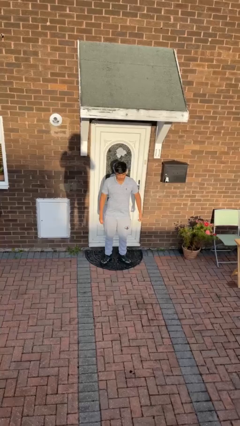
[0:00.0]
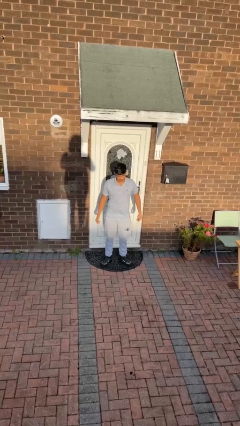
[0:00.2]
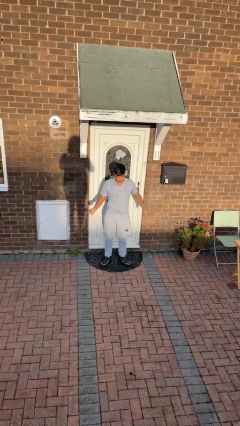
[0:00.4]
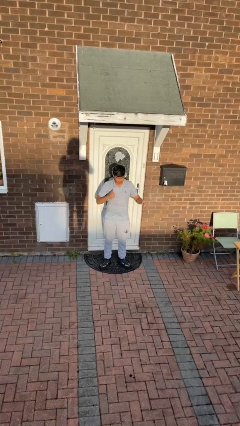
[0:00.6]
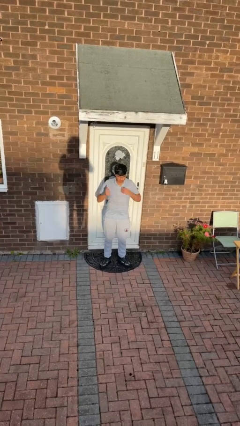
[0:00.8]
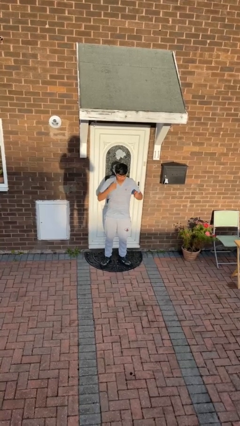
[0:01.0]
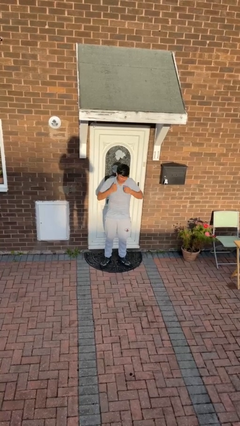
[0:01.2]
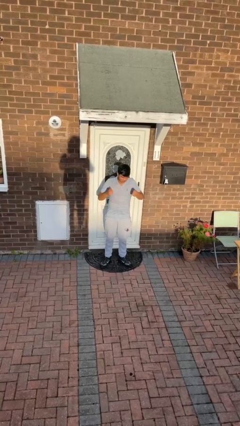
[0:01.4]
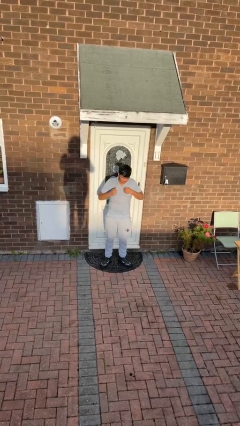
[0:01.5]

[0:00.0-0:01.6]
person drums on chest

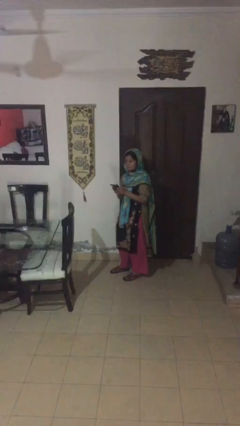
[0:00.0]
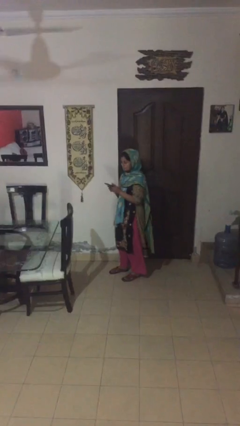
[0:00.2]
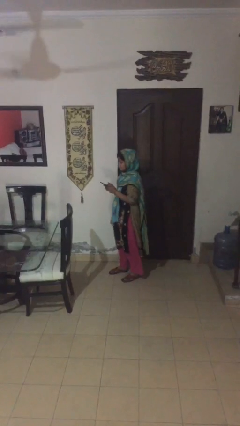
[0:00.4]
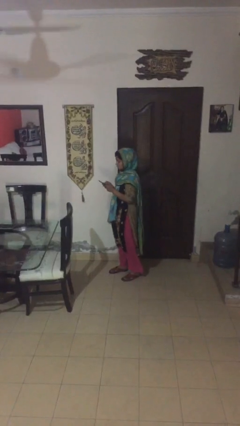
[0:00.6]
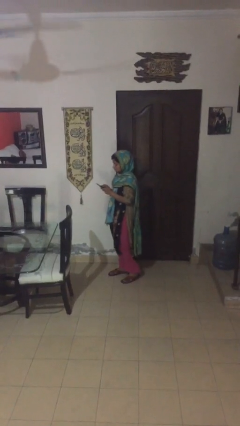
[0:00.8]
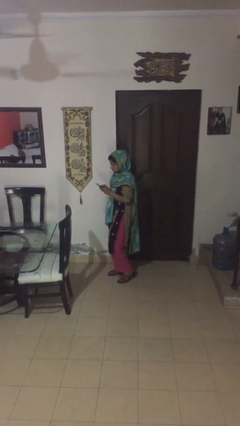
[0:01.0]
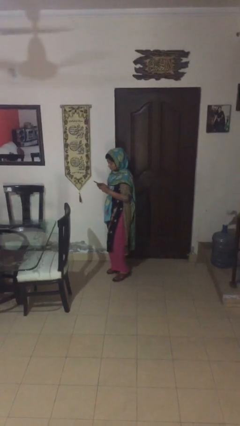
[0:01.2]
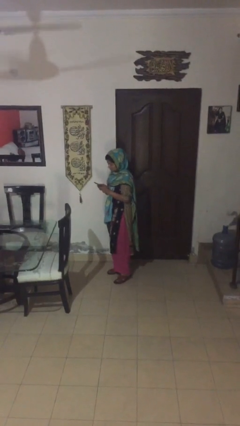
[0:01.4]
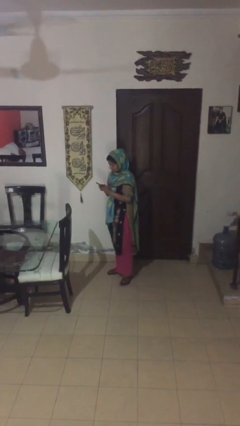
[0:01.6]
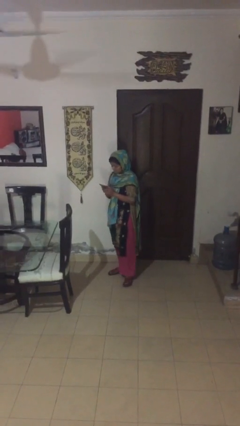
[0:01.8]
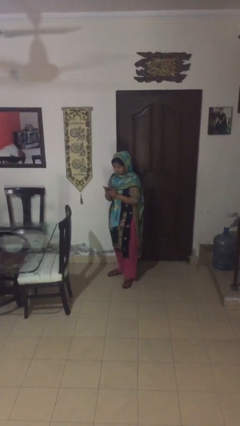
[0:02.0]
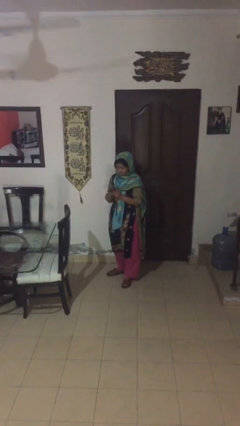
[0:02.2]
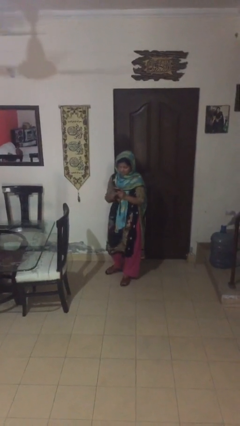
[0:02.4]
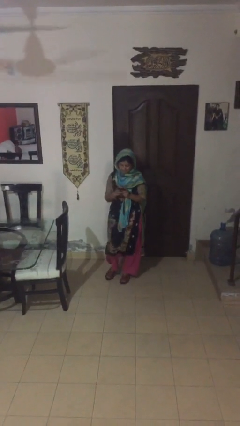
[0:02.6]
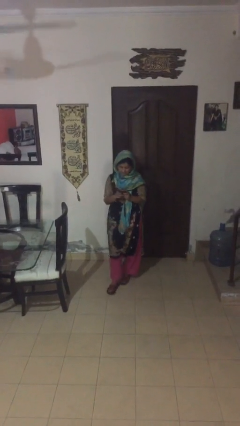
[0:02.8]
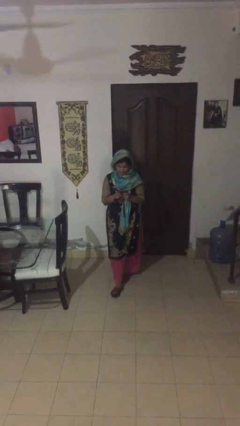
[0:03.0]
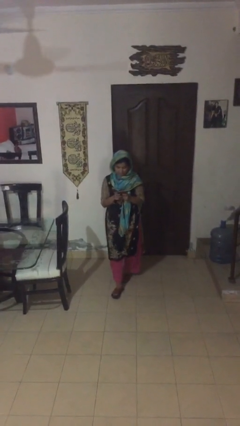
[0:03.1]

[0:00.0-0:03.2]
person texts on phone

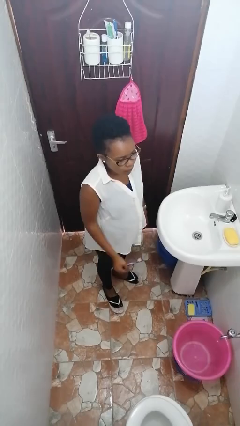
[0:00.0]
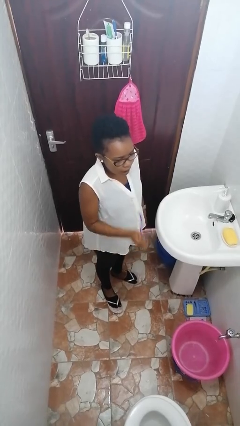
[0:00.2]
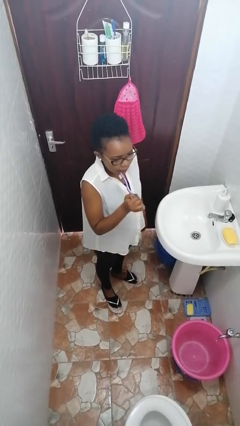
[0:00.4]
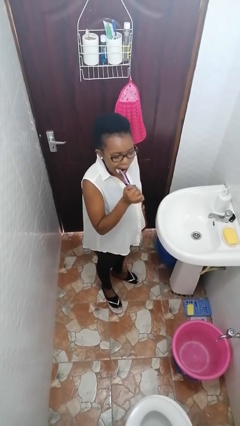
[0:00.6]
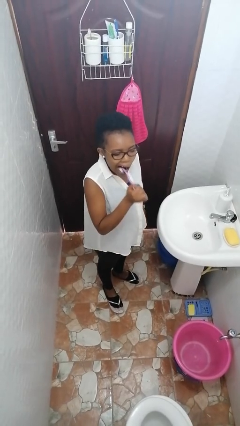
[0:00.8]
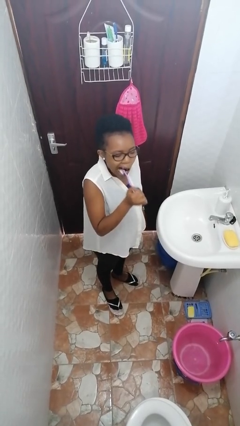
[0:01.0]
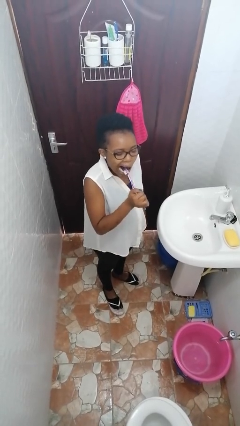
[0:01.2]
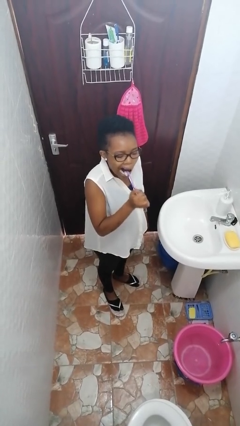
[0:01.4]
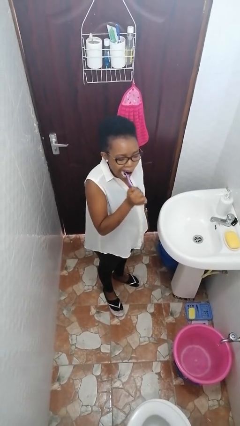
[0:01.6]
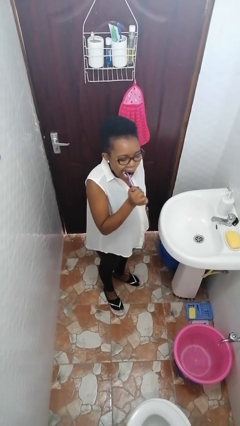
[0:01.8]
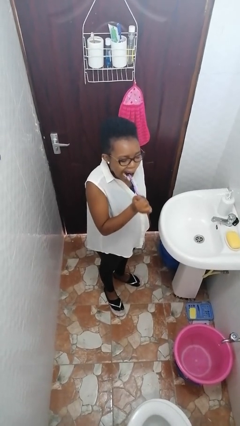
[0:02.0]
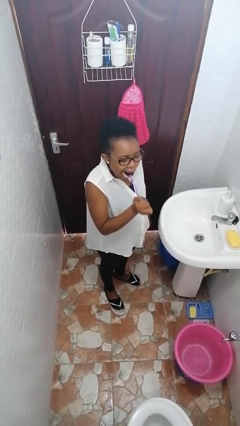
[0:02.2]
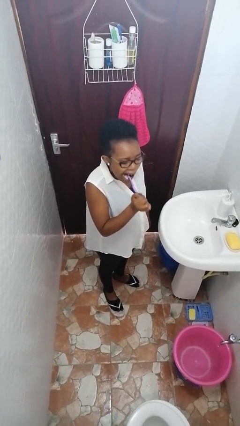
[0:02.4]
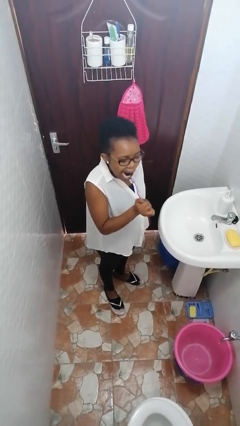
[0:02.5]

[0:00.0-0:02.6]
person brushes teeth

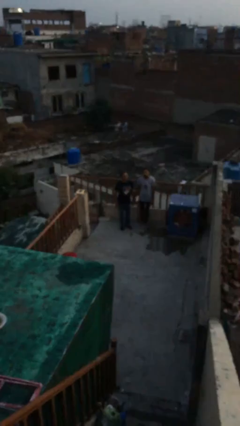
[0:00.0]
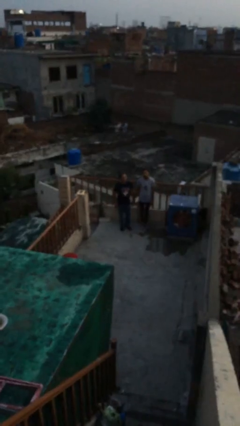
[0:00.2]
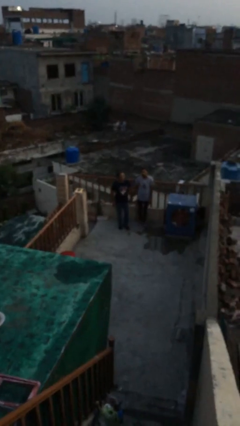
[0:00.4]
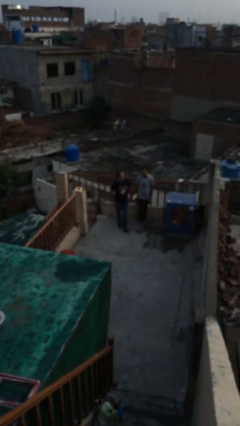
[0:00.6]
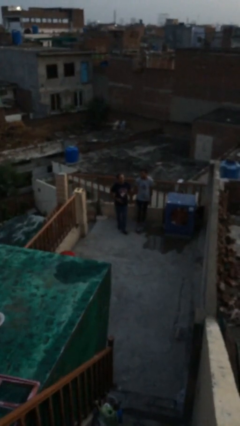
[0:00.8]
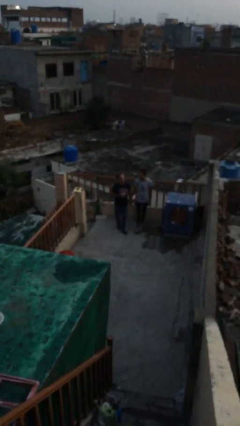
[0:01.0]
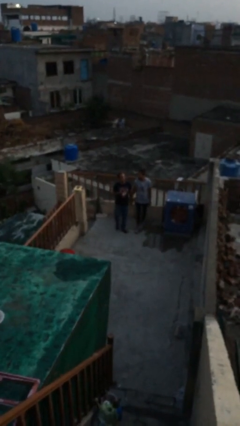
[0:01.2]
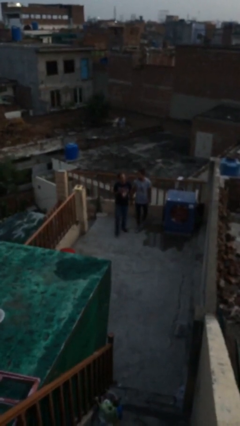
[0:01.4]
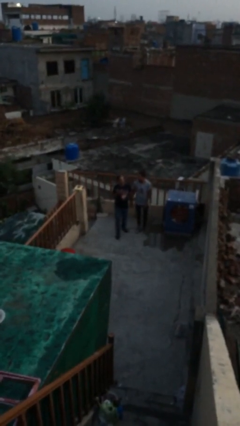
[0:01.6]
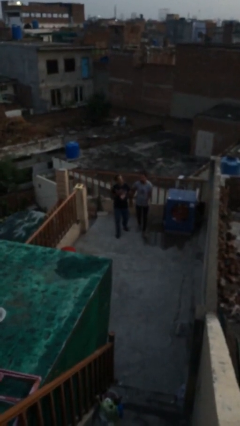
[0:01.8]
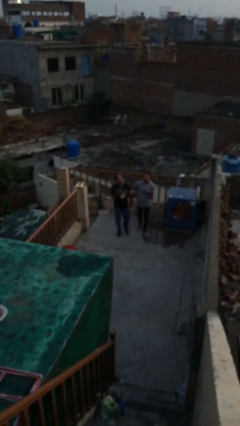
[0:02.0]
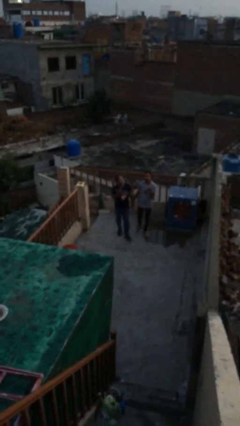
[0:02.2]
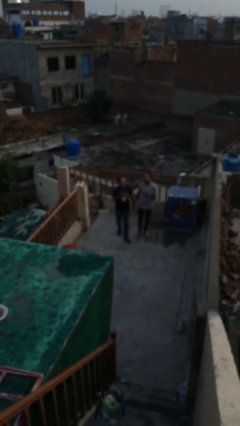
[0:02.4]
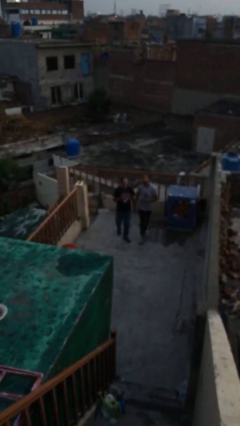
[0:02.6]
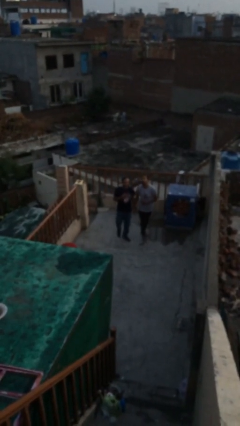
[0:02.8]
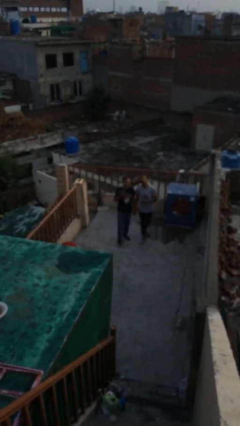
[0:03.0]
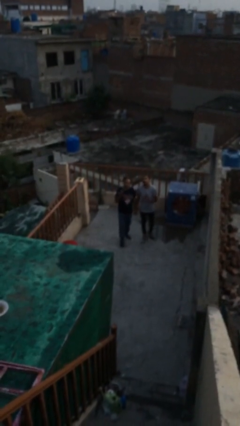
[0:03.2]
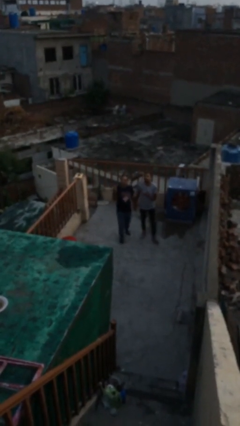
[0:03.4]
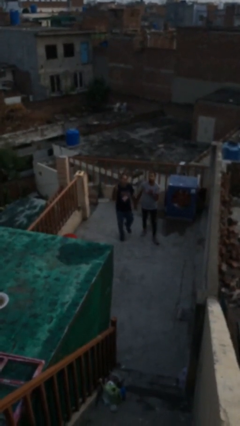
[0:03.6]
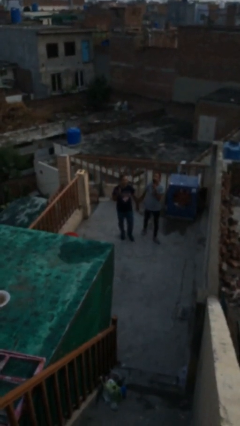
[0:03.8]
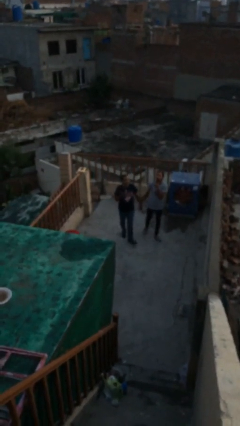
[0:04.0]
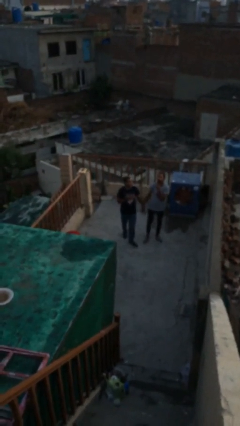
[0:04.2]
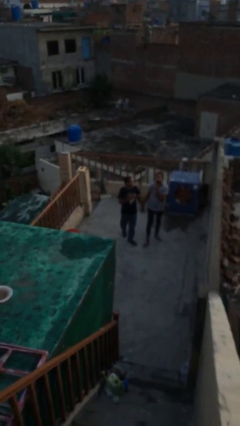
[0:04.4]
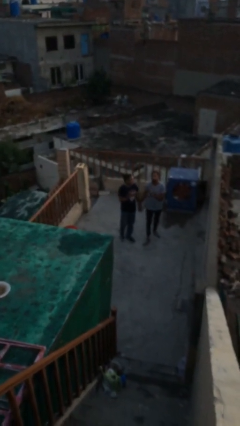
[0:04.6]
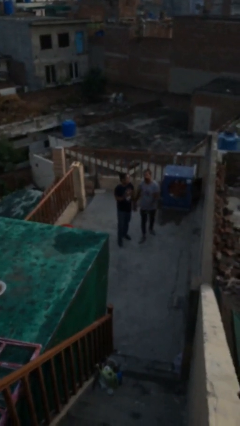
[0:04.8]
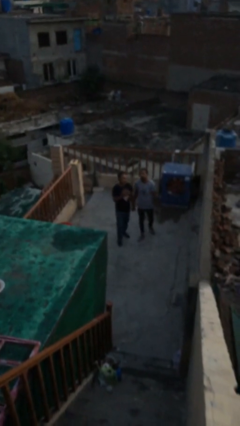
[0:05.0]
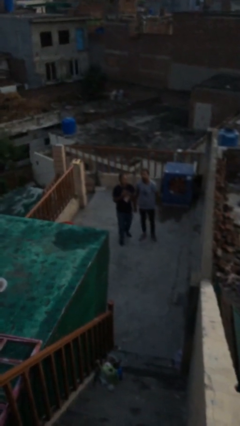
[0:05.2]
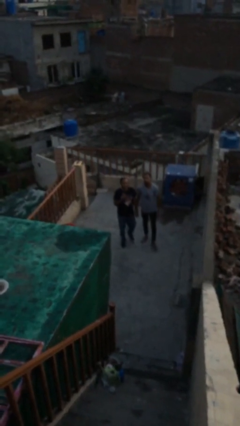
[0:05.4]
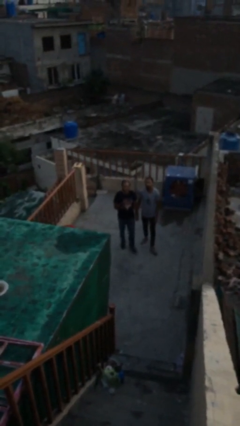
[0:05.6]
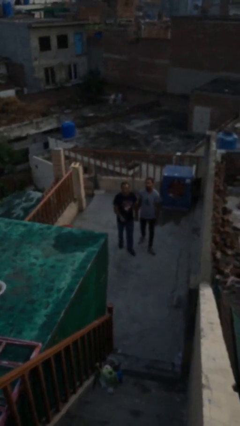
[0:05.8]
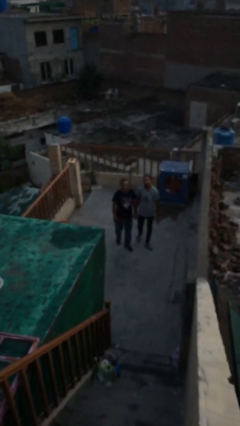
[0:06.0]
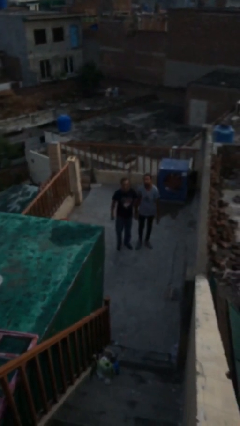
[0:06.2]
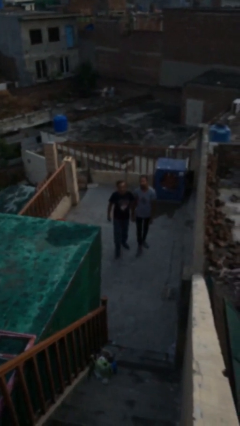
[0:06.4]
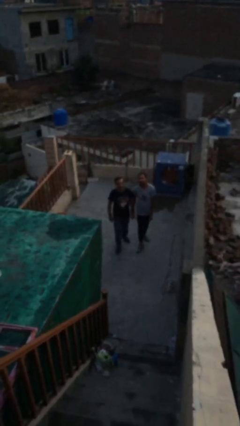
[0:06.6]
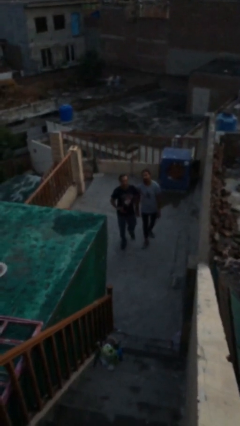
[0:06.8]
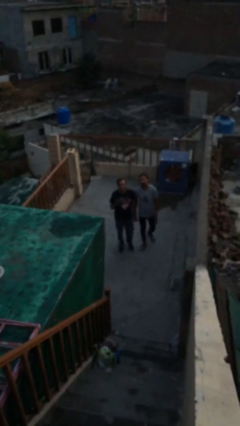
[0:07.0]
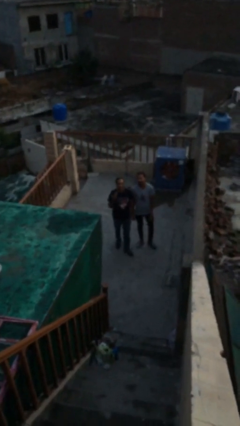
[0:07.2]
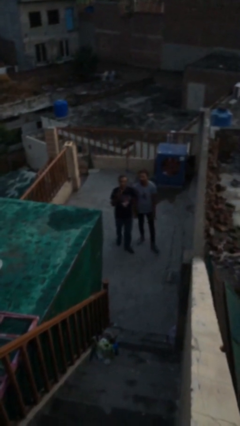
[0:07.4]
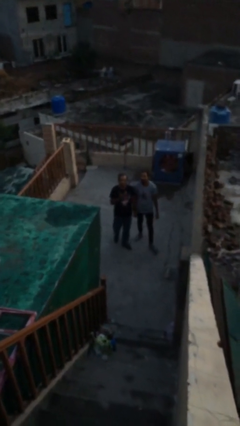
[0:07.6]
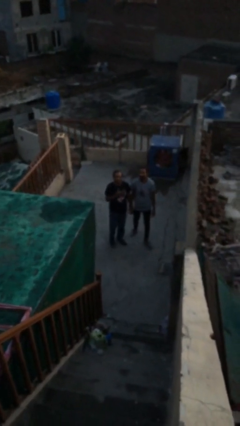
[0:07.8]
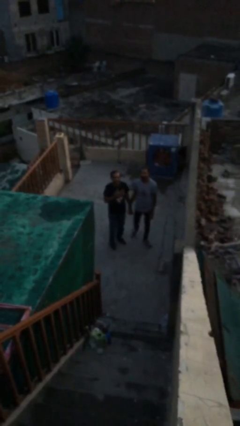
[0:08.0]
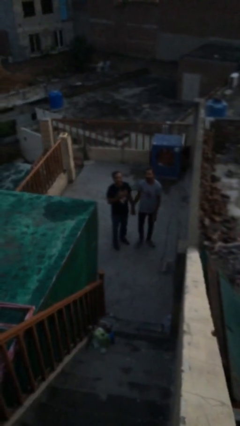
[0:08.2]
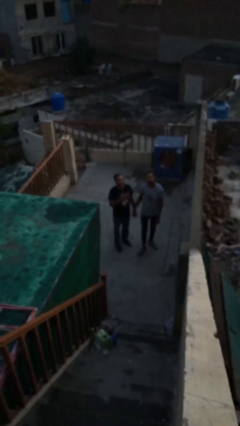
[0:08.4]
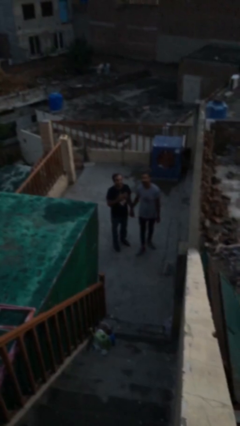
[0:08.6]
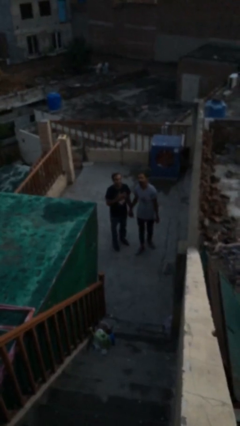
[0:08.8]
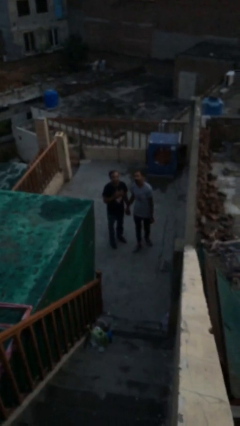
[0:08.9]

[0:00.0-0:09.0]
person holds hand

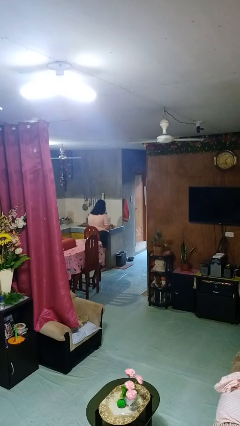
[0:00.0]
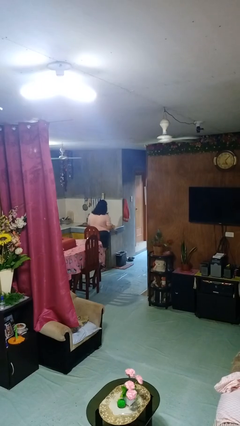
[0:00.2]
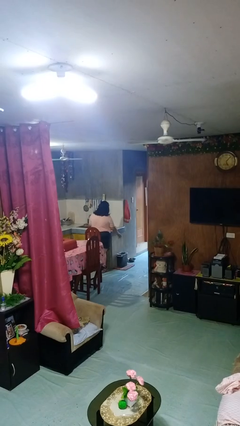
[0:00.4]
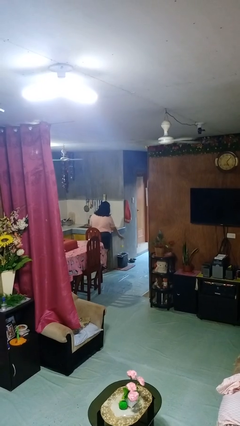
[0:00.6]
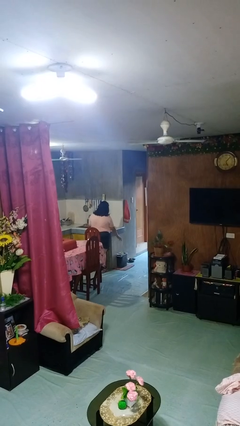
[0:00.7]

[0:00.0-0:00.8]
person discards trash
